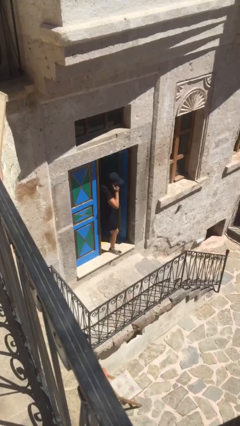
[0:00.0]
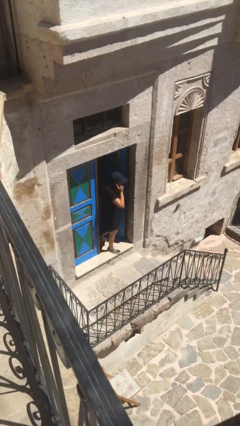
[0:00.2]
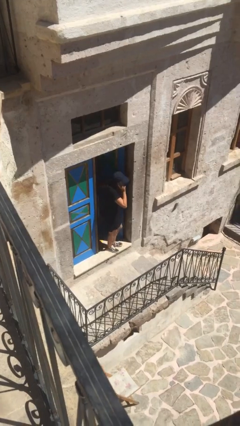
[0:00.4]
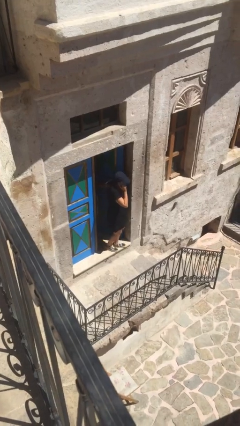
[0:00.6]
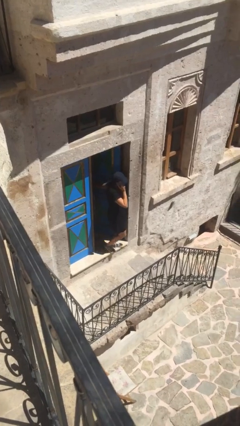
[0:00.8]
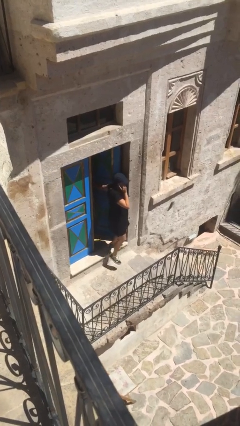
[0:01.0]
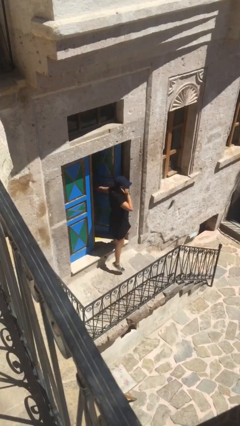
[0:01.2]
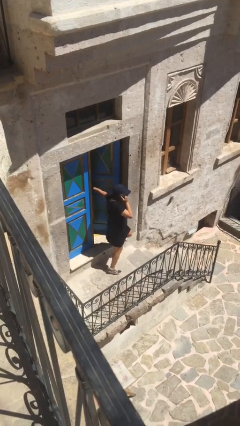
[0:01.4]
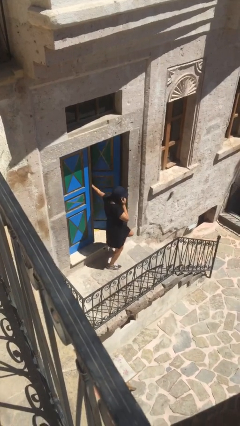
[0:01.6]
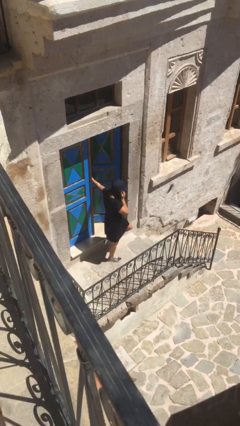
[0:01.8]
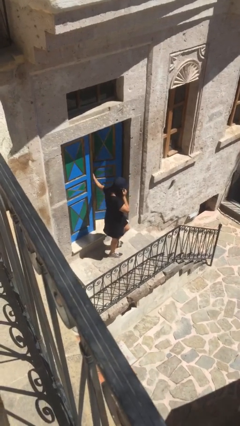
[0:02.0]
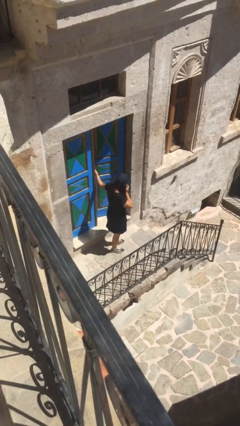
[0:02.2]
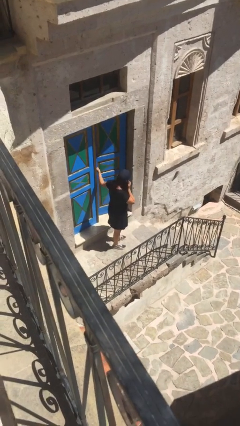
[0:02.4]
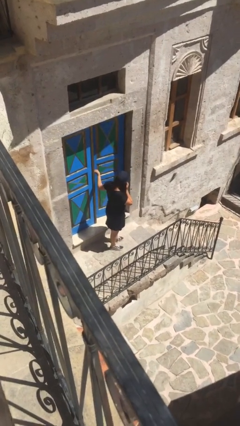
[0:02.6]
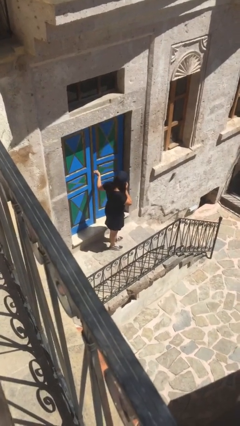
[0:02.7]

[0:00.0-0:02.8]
person enters scene through structure

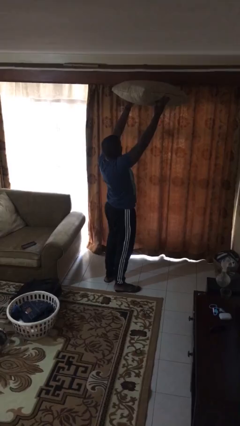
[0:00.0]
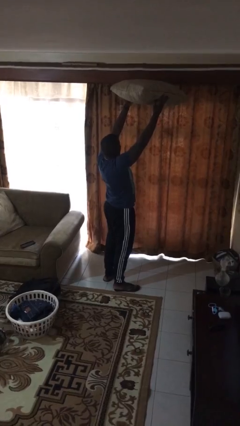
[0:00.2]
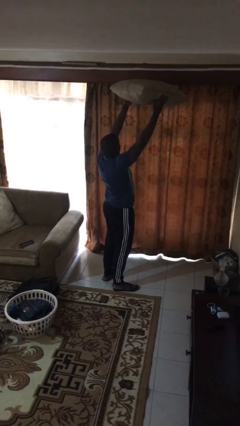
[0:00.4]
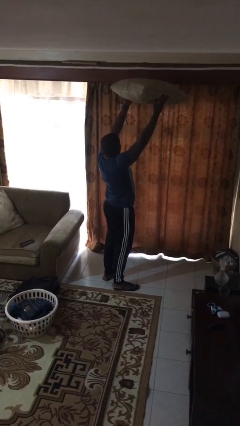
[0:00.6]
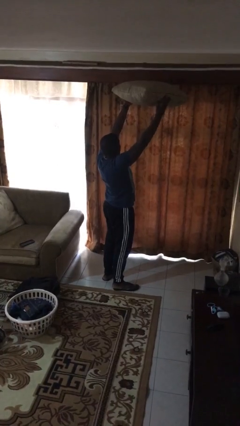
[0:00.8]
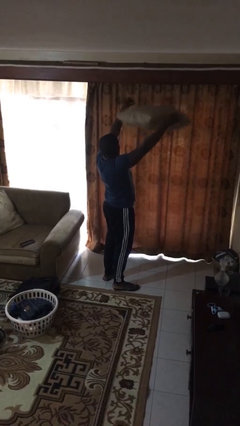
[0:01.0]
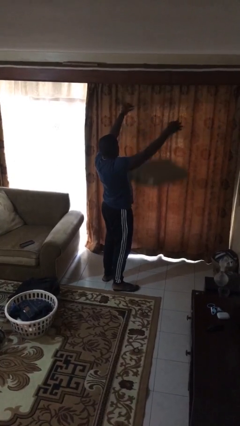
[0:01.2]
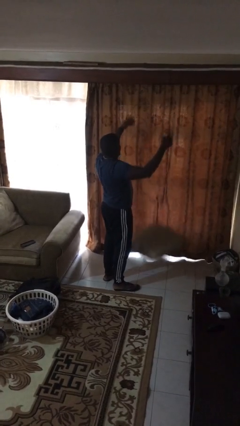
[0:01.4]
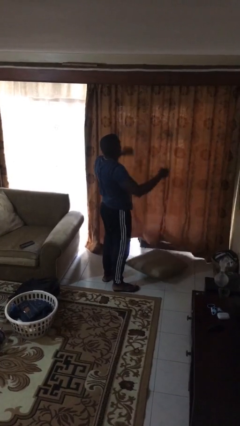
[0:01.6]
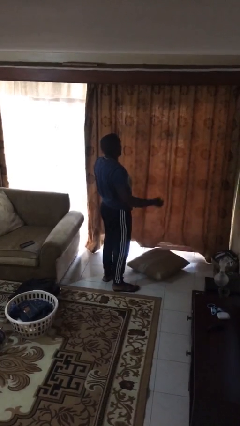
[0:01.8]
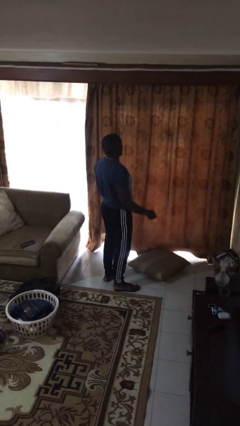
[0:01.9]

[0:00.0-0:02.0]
person drops object

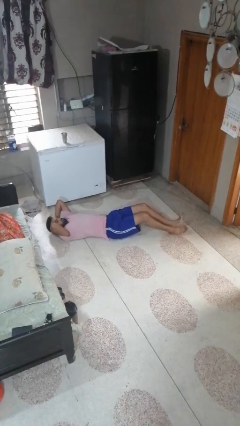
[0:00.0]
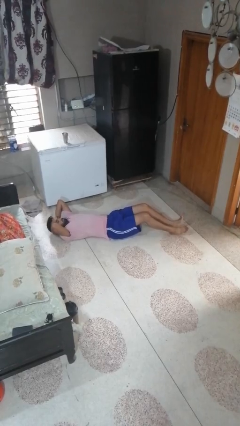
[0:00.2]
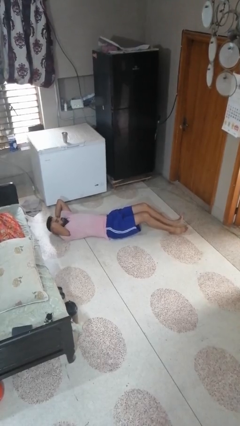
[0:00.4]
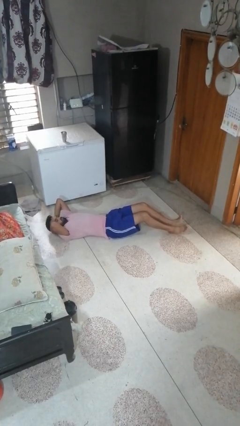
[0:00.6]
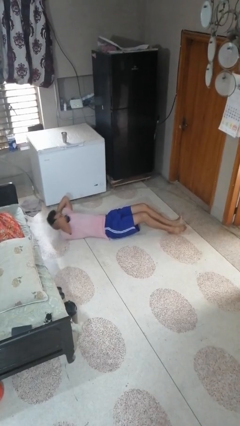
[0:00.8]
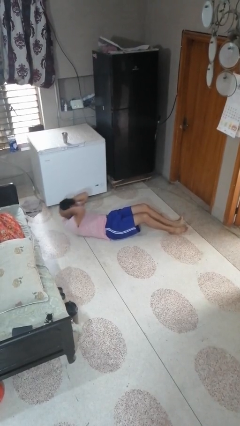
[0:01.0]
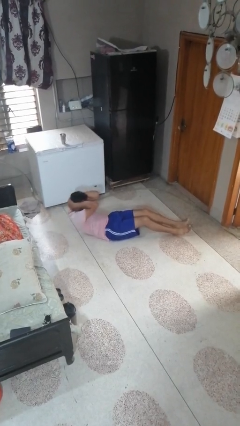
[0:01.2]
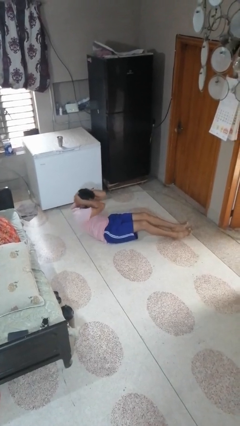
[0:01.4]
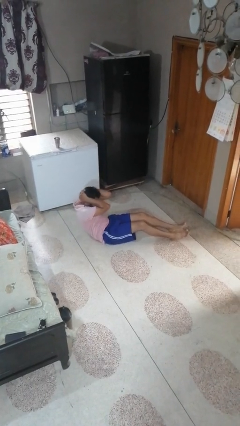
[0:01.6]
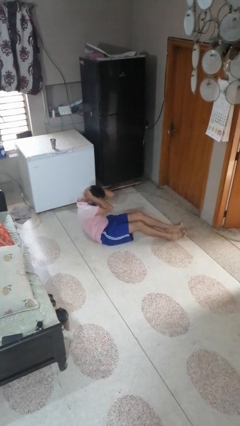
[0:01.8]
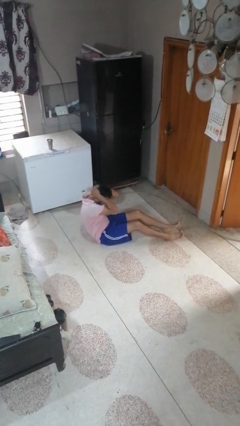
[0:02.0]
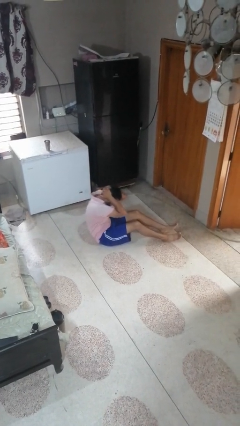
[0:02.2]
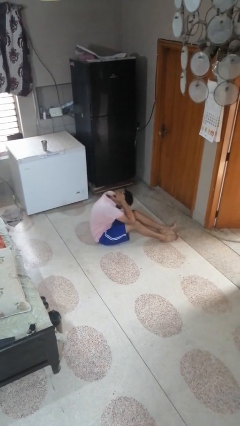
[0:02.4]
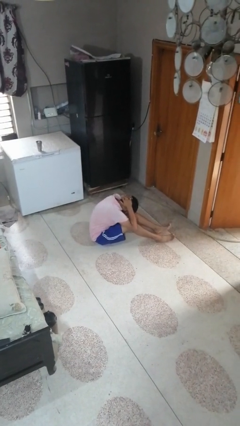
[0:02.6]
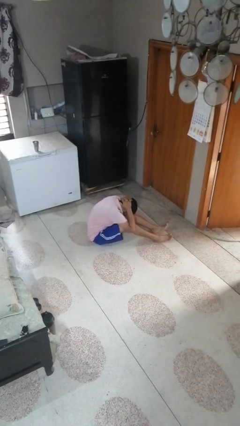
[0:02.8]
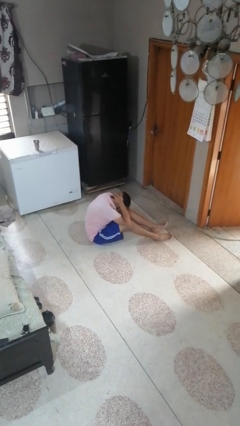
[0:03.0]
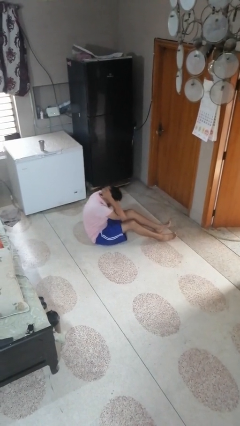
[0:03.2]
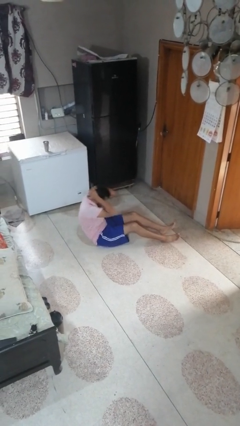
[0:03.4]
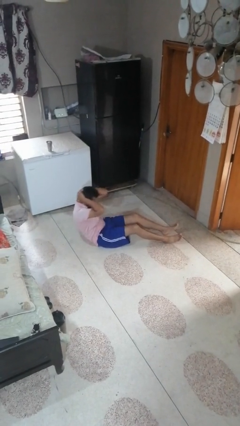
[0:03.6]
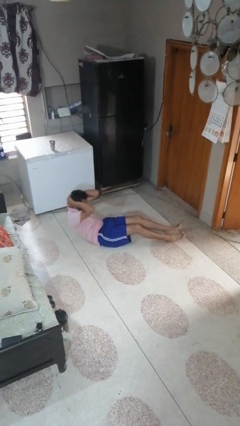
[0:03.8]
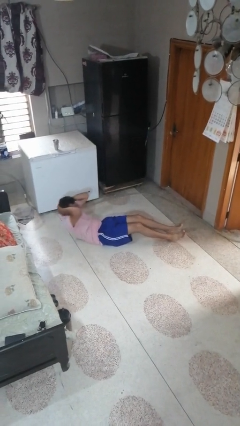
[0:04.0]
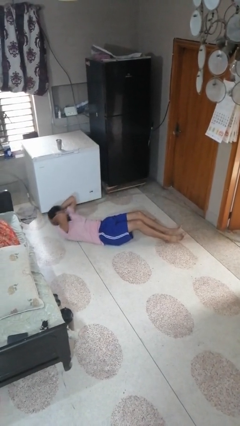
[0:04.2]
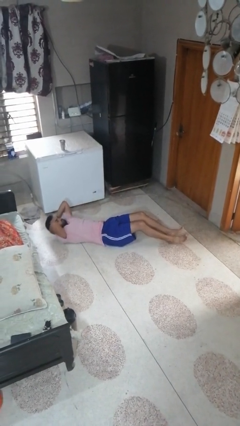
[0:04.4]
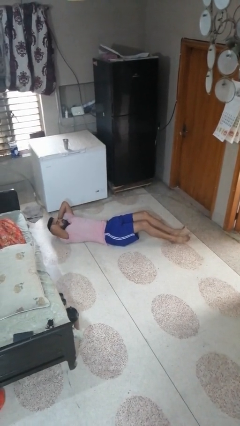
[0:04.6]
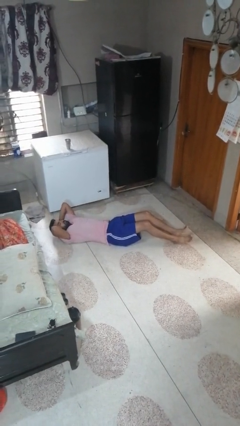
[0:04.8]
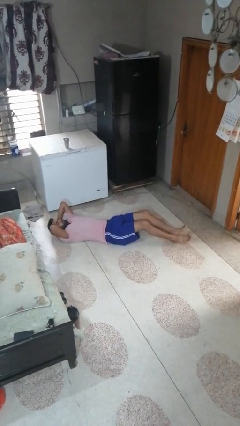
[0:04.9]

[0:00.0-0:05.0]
person exercises with situp

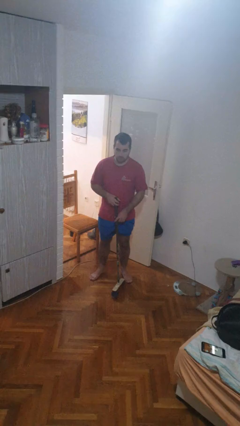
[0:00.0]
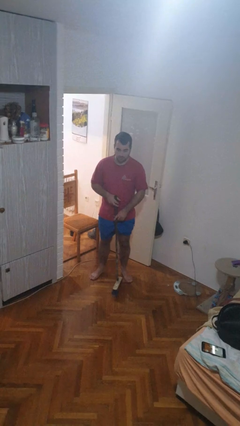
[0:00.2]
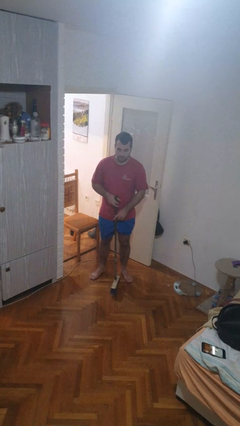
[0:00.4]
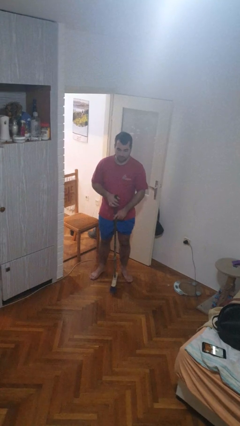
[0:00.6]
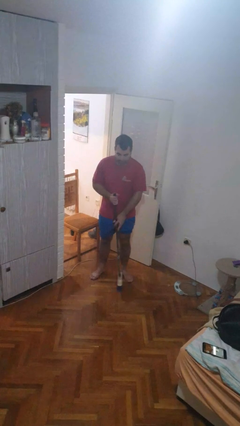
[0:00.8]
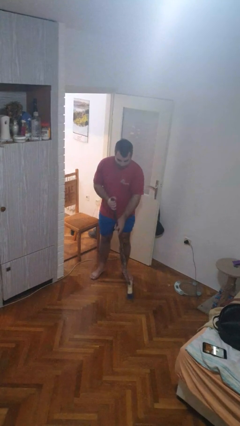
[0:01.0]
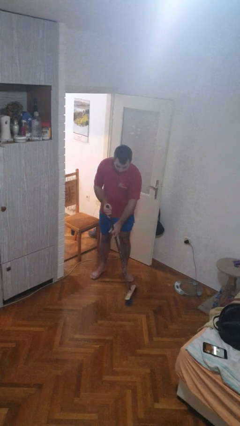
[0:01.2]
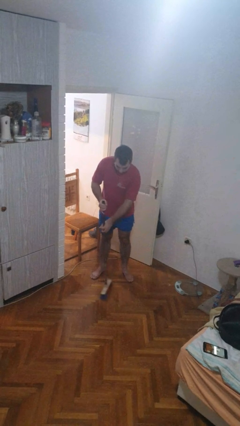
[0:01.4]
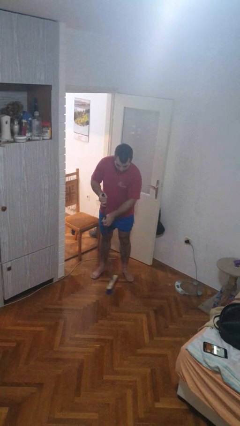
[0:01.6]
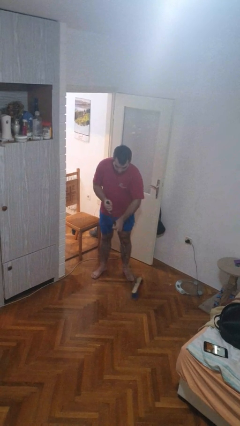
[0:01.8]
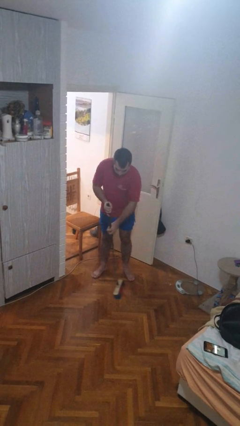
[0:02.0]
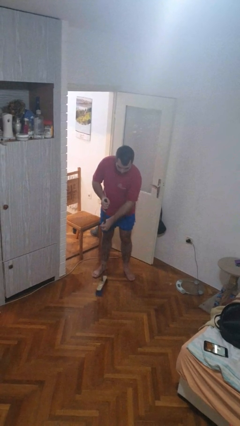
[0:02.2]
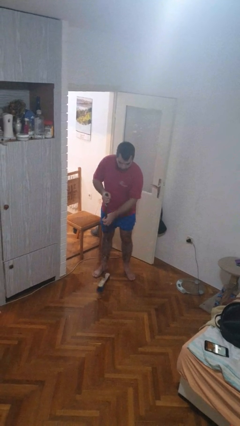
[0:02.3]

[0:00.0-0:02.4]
person sweeps floor

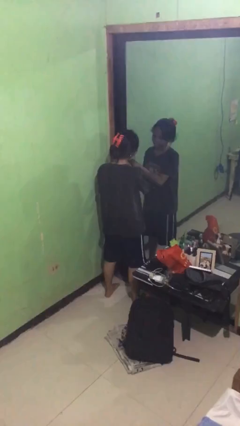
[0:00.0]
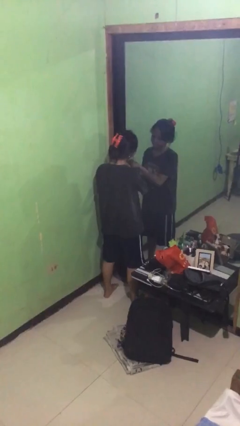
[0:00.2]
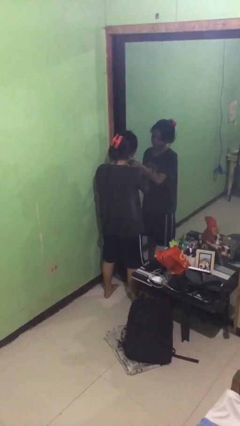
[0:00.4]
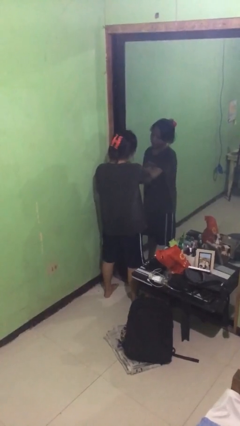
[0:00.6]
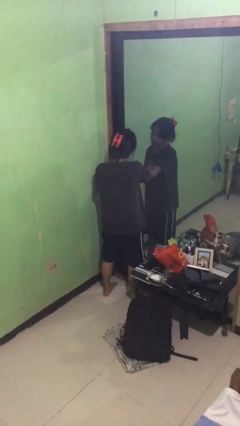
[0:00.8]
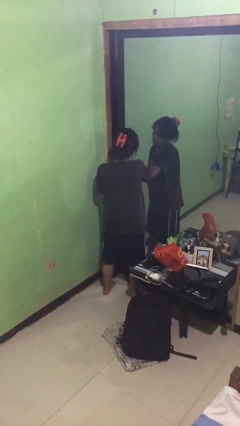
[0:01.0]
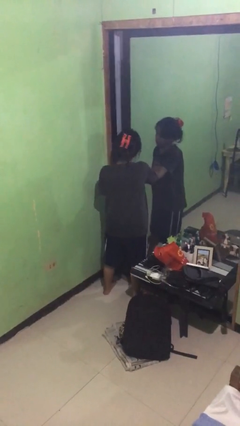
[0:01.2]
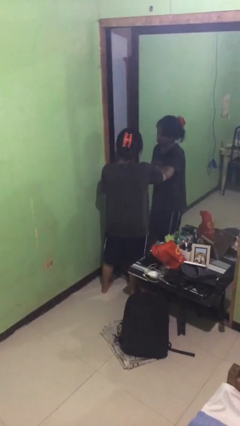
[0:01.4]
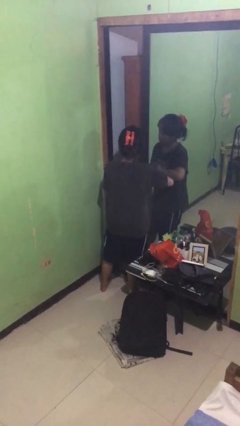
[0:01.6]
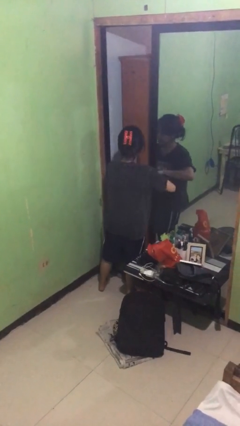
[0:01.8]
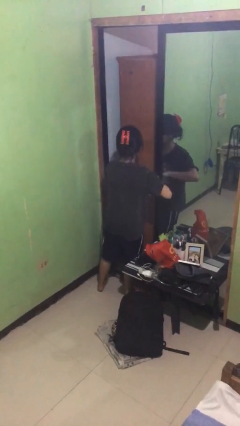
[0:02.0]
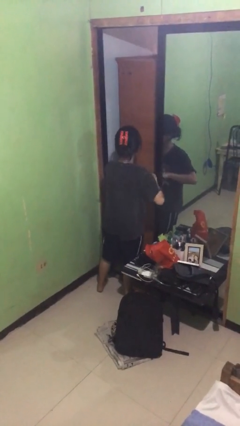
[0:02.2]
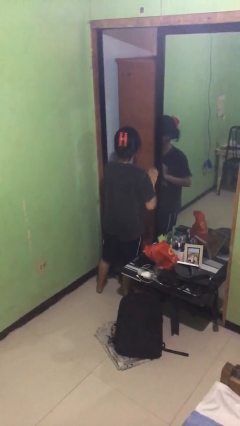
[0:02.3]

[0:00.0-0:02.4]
person opens sliding door

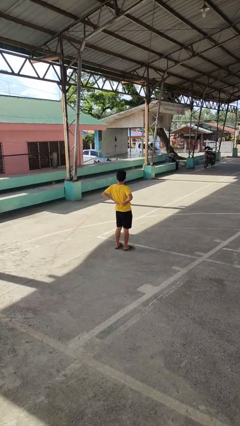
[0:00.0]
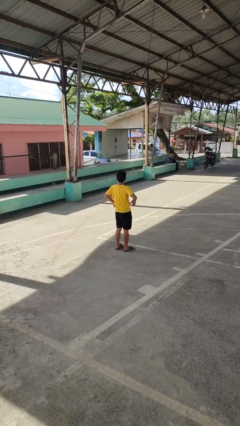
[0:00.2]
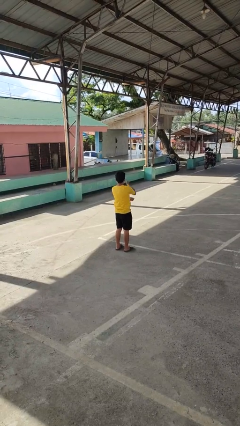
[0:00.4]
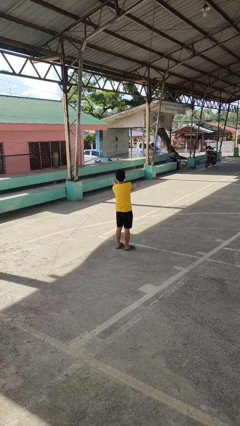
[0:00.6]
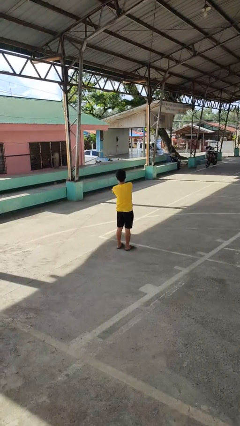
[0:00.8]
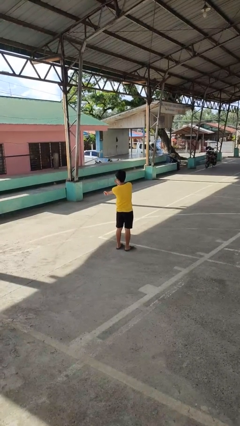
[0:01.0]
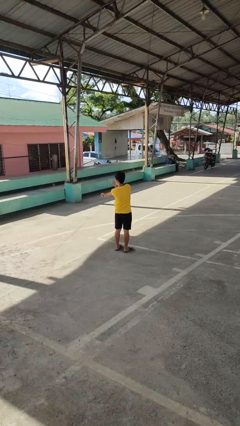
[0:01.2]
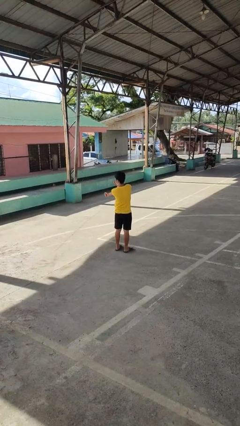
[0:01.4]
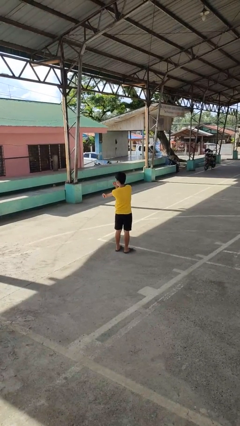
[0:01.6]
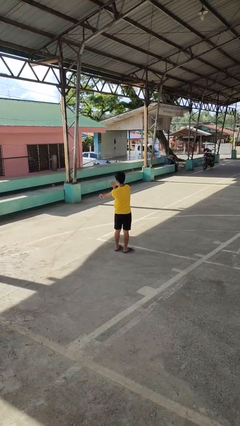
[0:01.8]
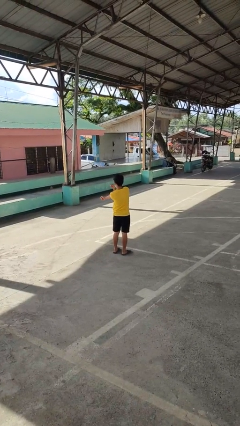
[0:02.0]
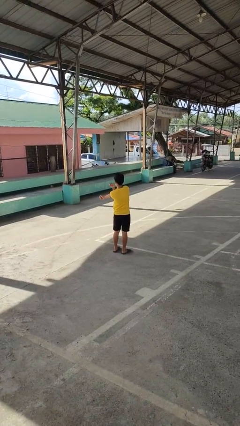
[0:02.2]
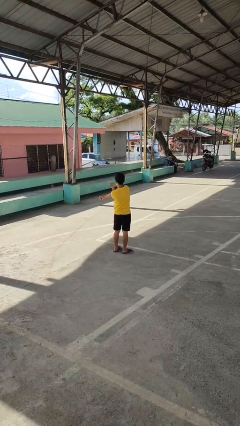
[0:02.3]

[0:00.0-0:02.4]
person stretches arms to side
